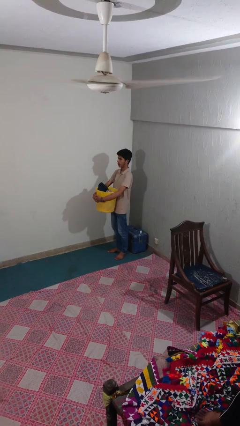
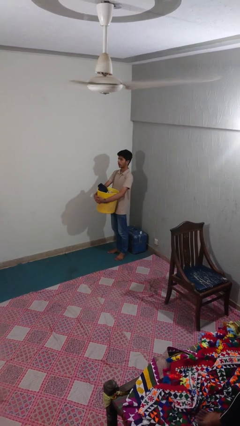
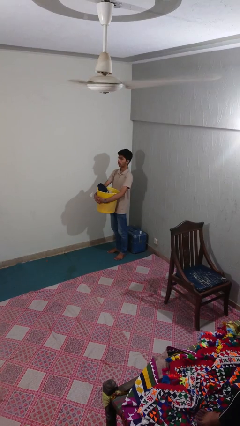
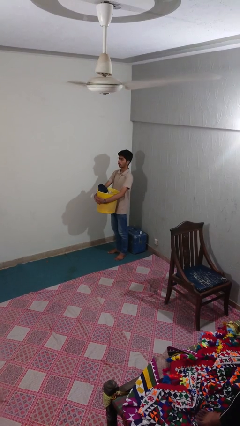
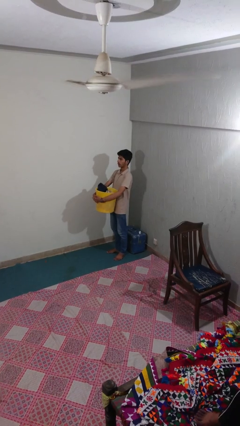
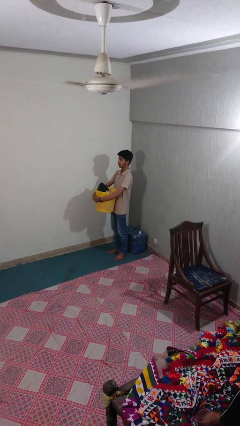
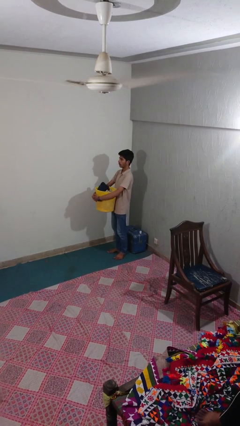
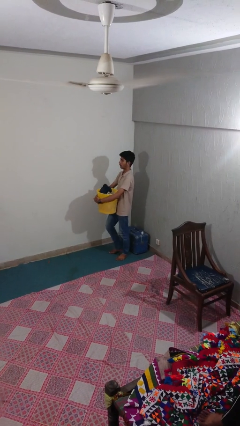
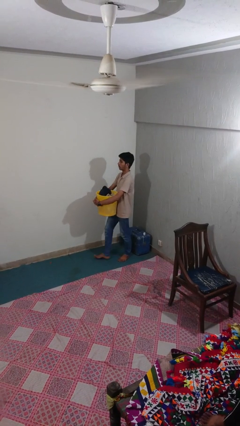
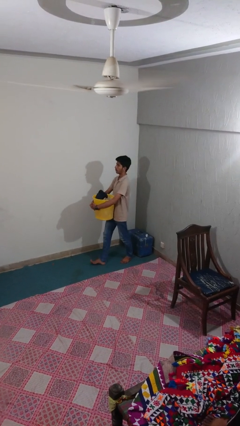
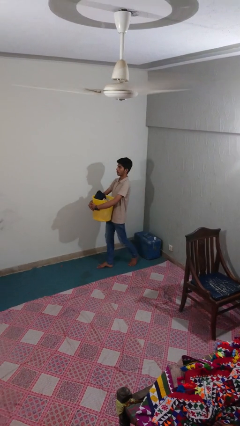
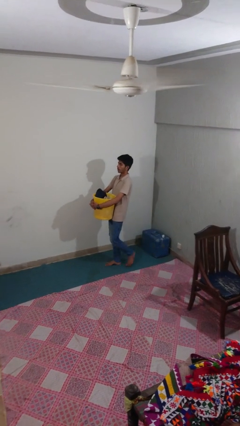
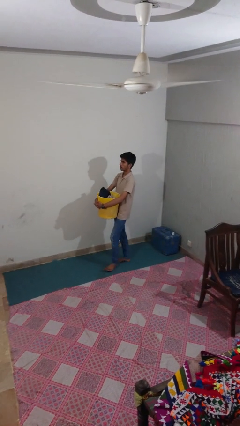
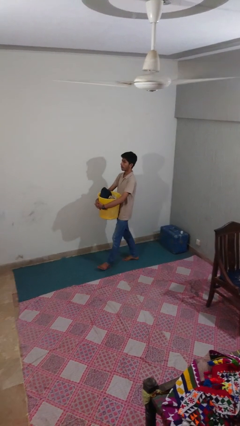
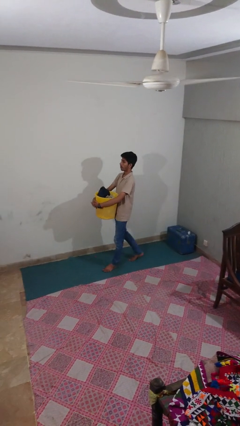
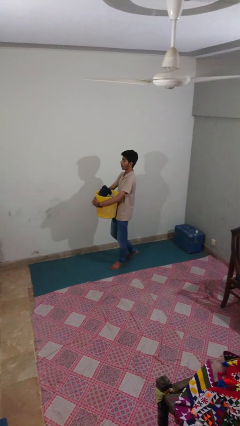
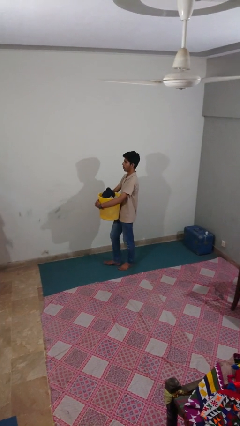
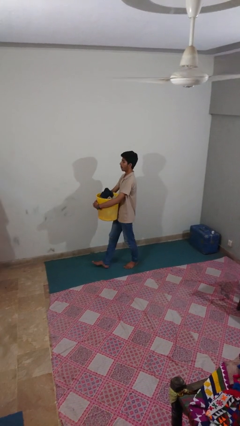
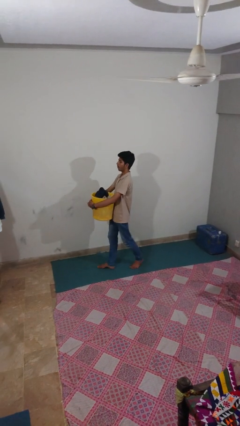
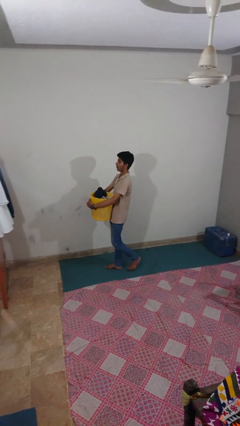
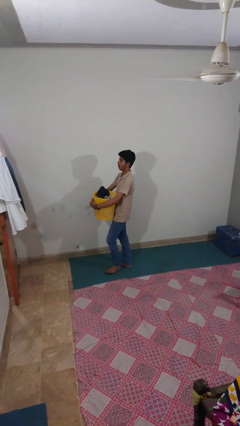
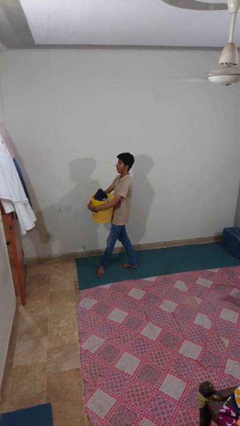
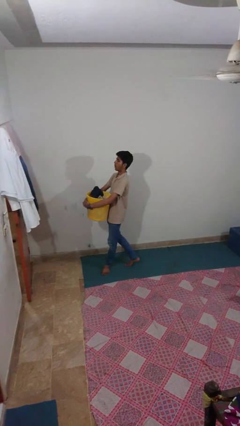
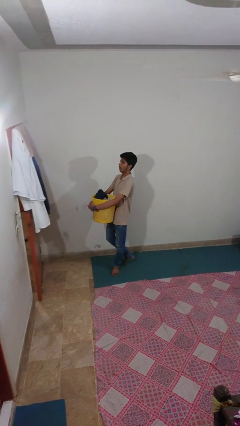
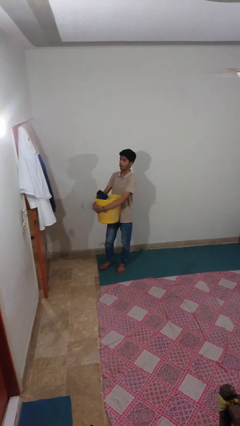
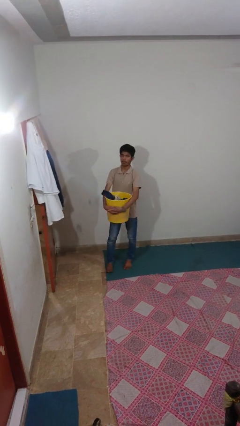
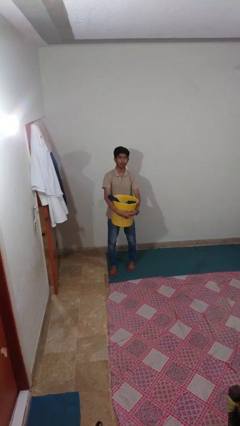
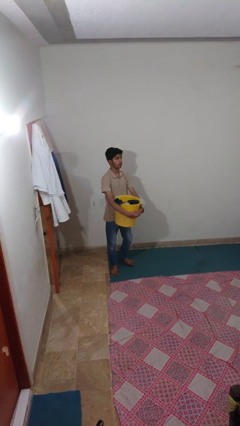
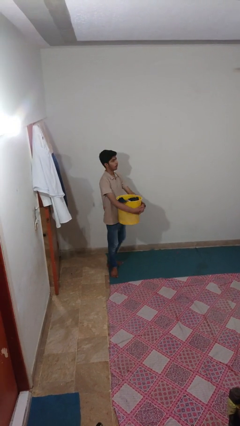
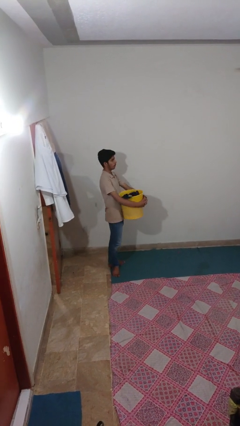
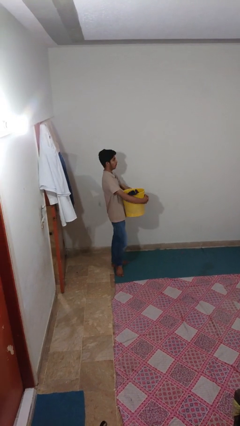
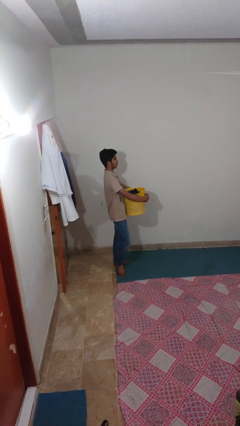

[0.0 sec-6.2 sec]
person carries laundry basket

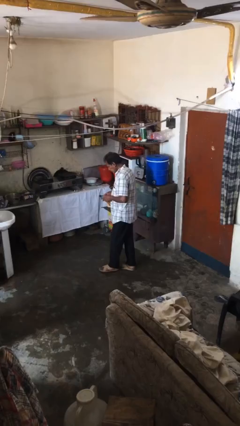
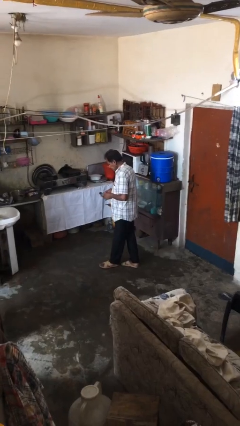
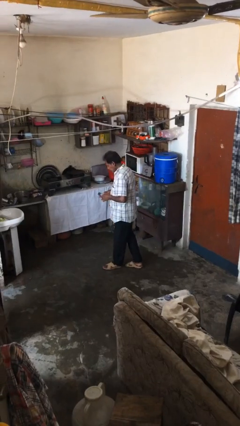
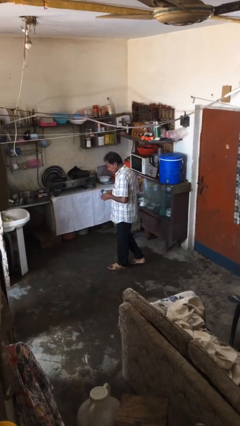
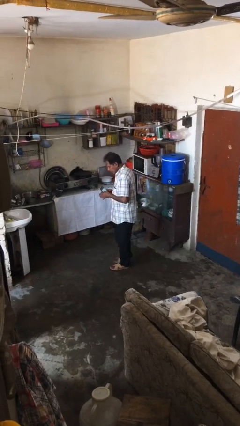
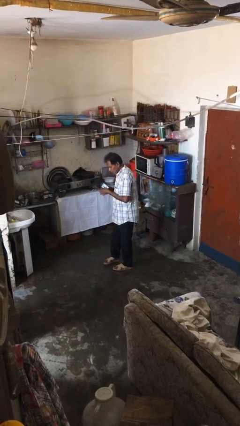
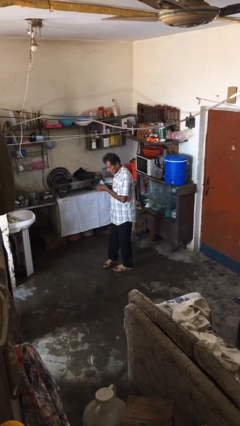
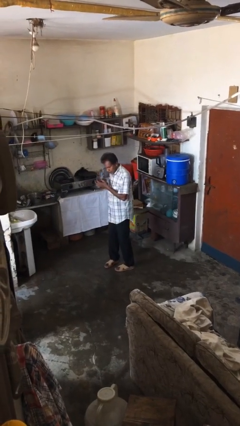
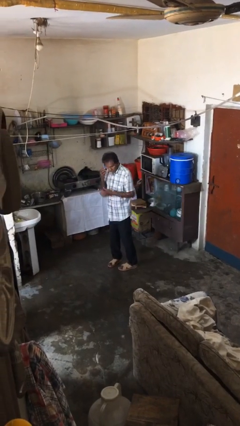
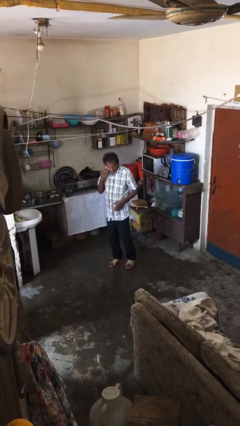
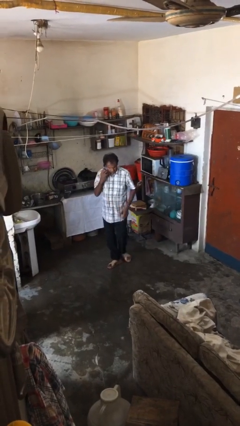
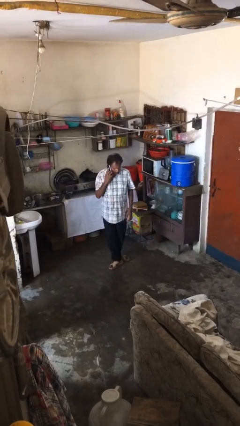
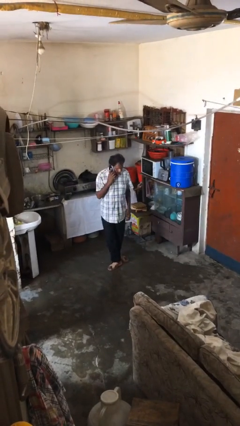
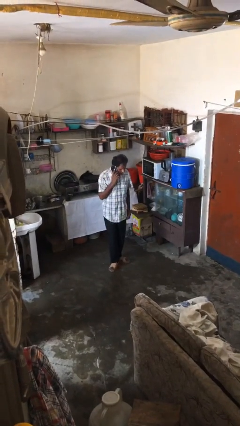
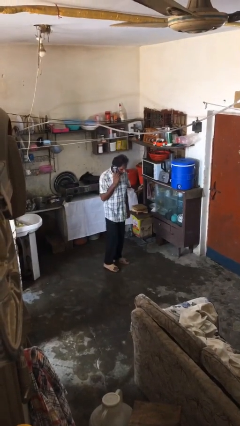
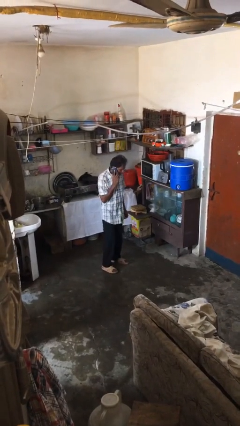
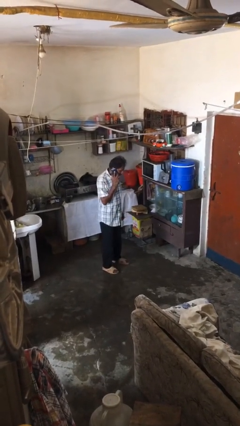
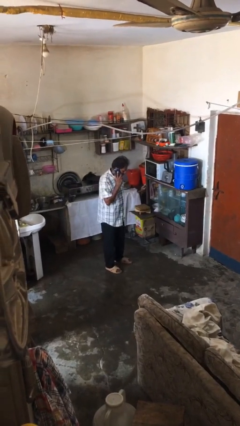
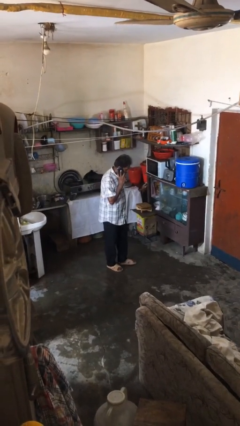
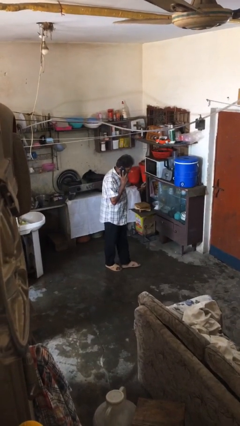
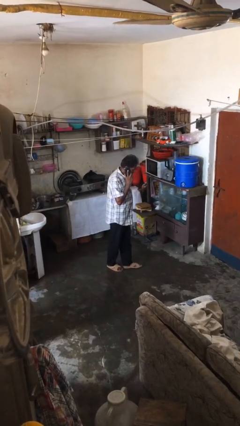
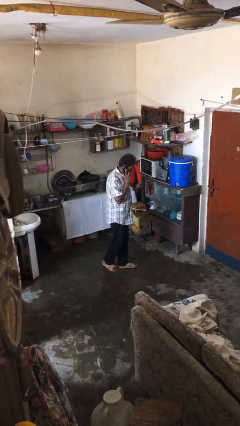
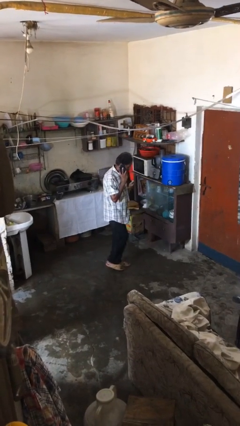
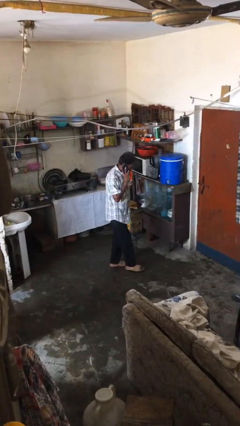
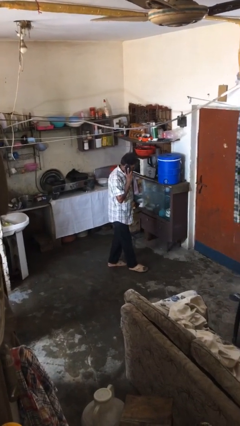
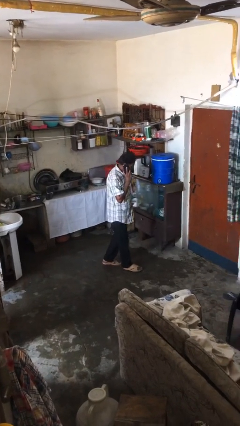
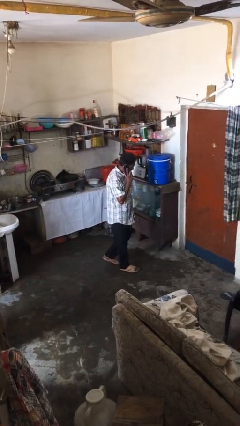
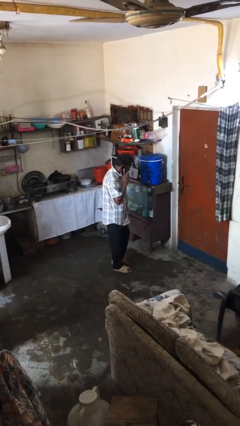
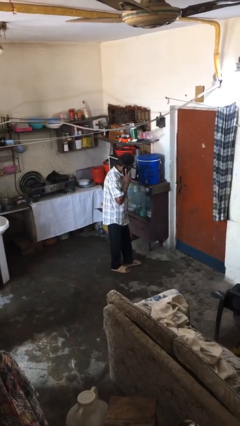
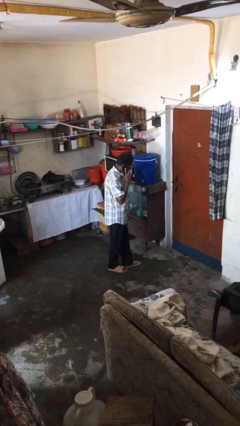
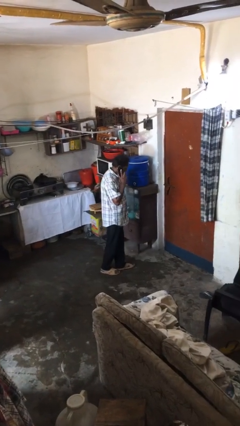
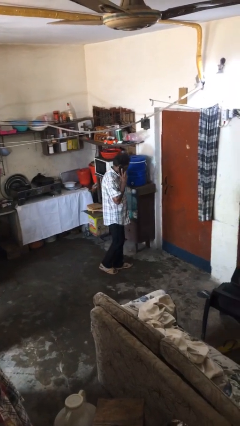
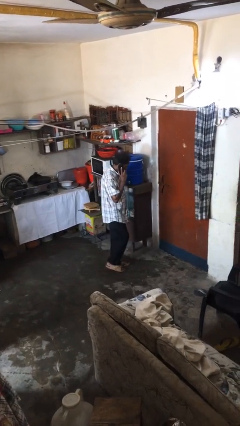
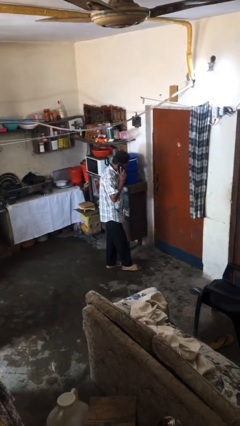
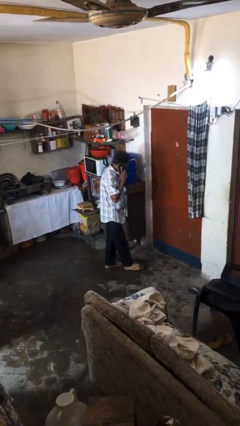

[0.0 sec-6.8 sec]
person talks on phone

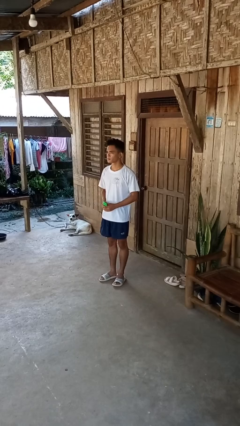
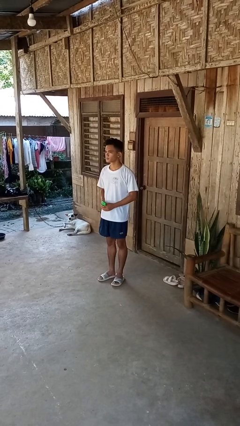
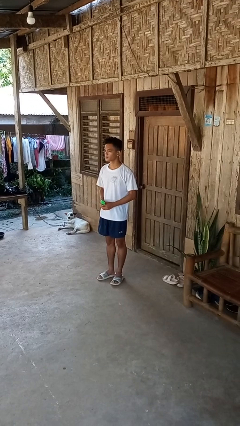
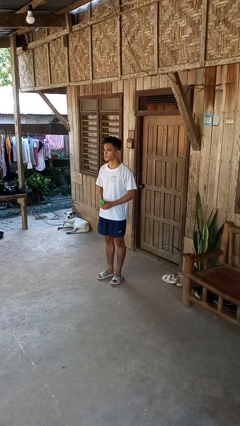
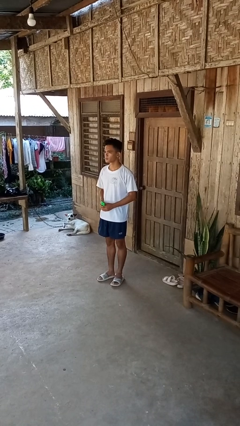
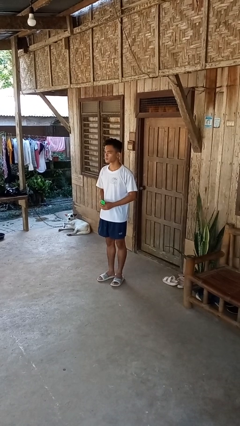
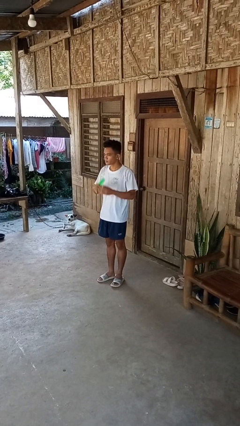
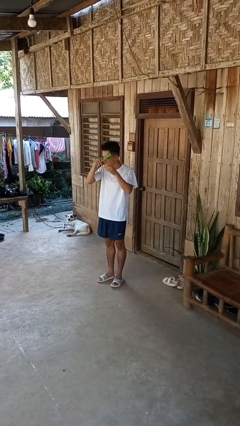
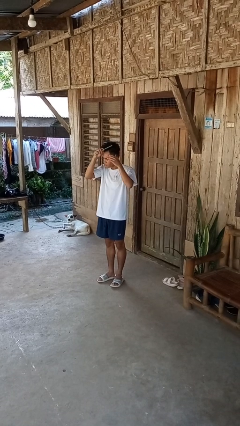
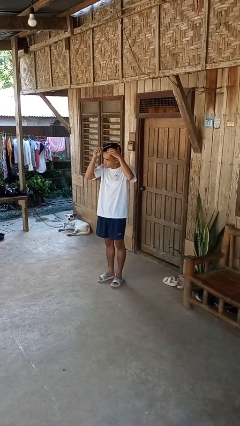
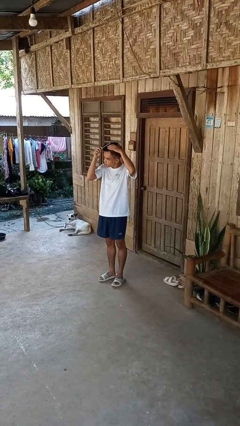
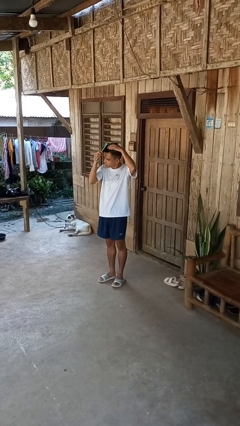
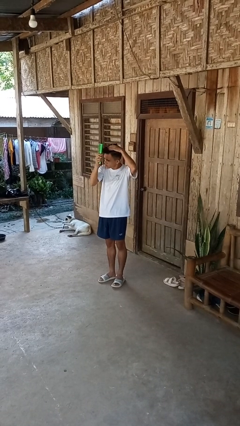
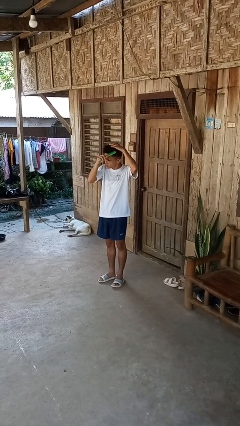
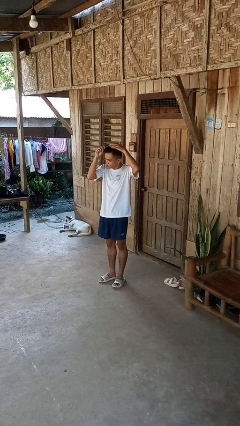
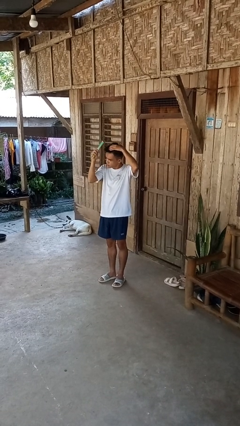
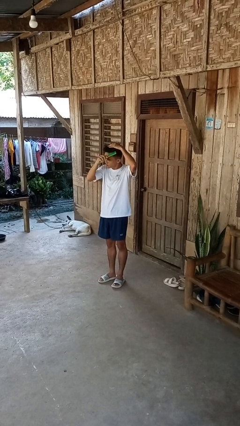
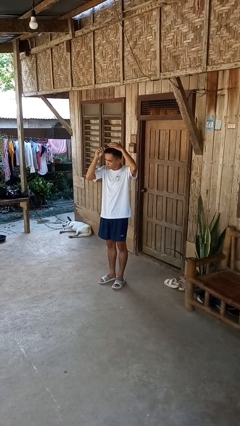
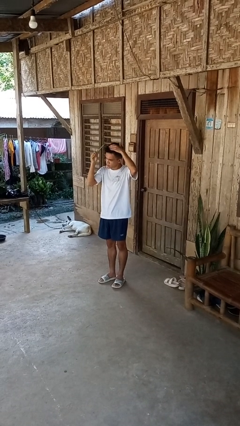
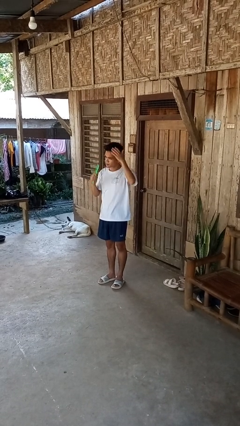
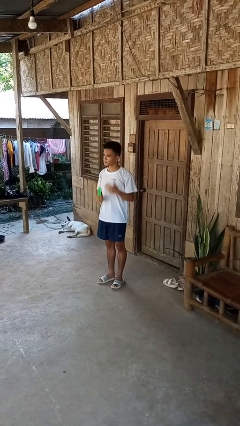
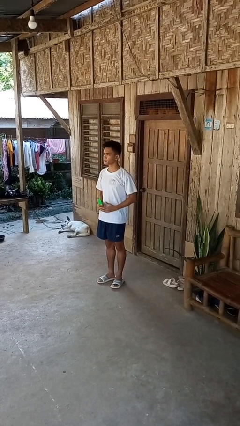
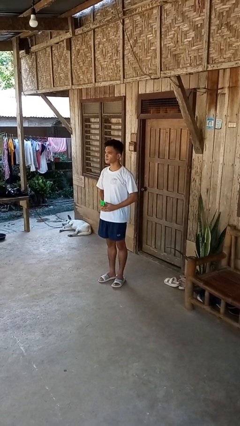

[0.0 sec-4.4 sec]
person brushes hair
